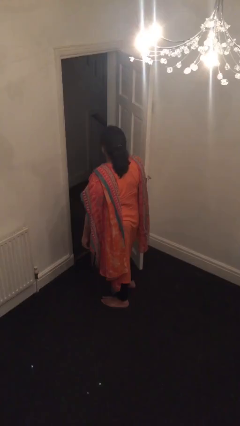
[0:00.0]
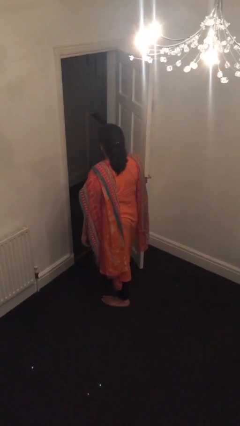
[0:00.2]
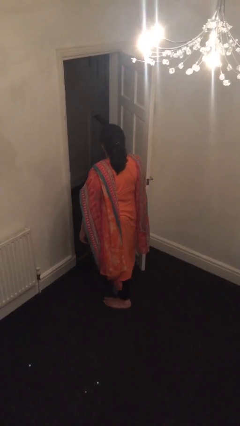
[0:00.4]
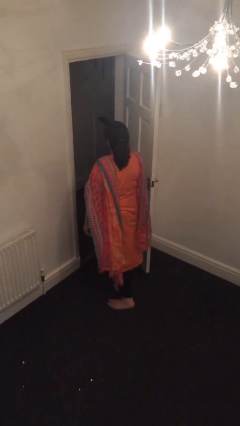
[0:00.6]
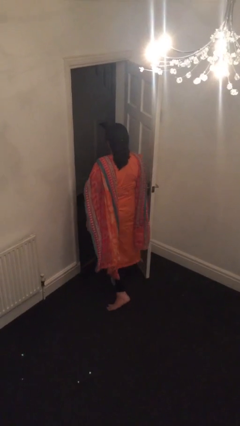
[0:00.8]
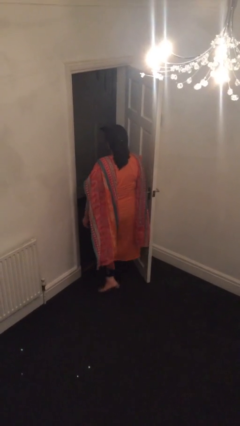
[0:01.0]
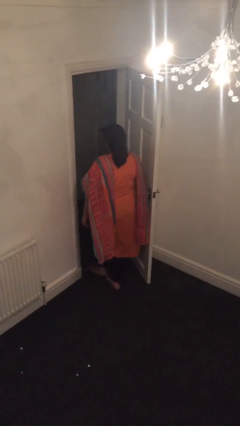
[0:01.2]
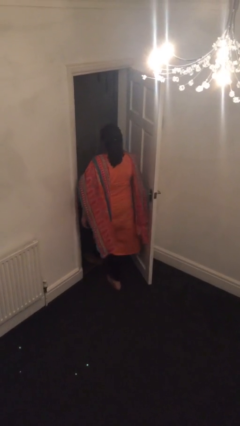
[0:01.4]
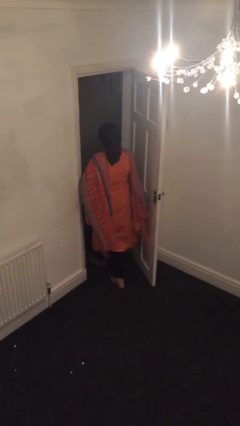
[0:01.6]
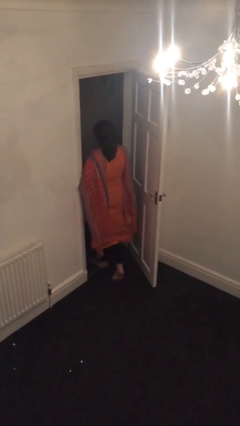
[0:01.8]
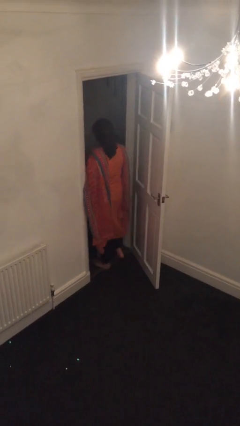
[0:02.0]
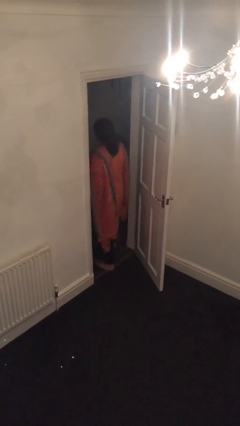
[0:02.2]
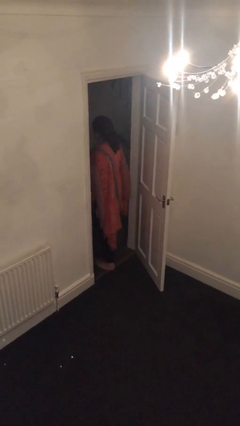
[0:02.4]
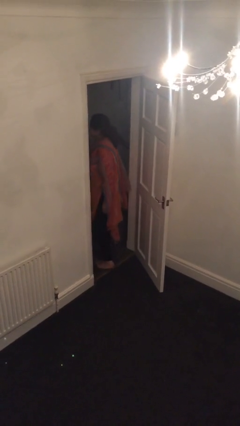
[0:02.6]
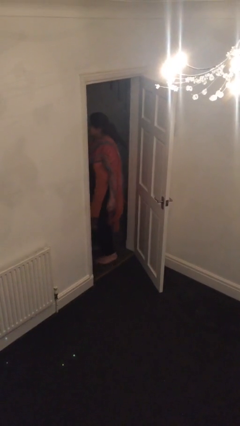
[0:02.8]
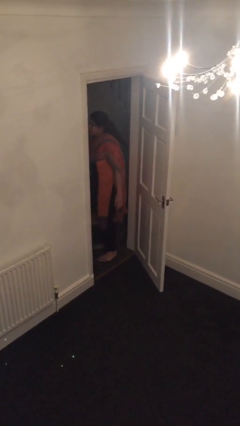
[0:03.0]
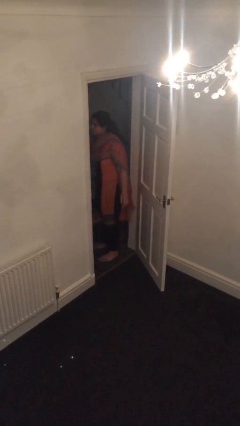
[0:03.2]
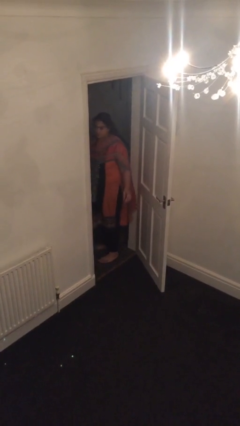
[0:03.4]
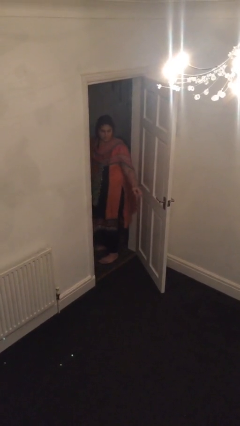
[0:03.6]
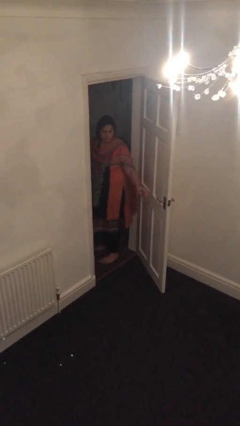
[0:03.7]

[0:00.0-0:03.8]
person exits scene through structure

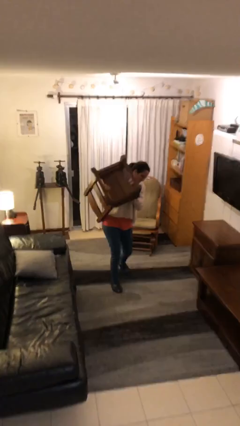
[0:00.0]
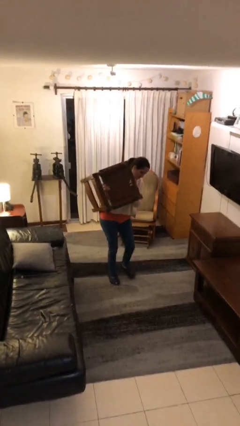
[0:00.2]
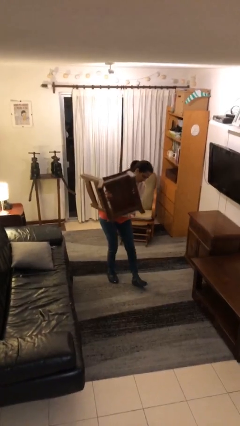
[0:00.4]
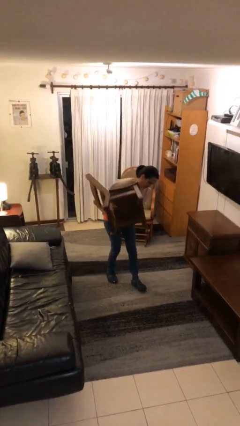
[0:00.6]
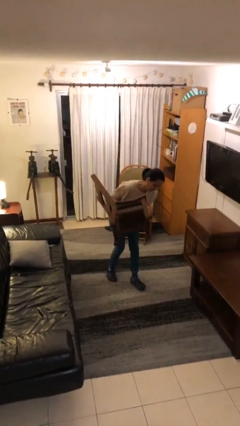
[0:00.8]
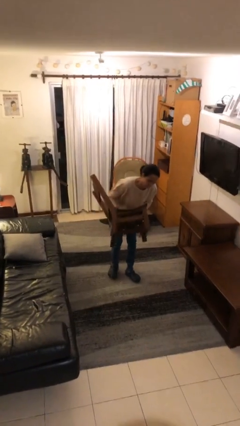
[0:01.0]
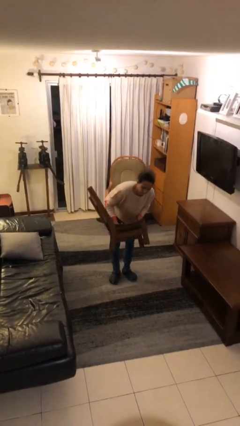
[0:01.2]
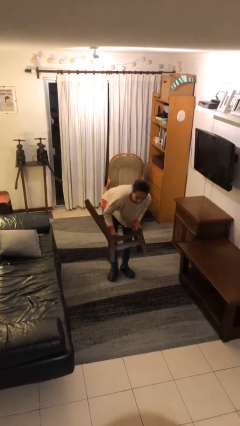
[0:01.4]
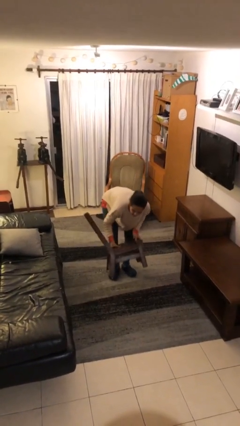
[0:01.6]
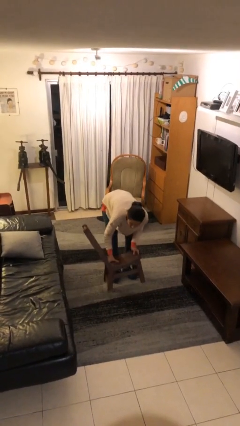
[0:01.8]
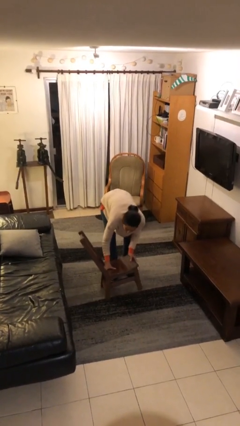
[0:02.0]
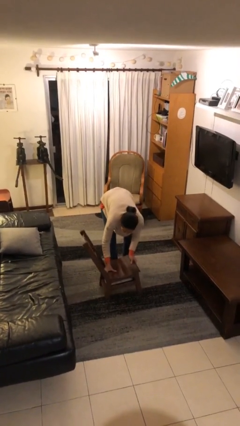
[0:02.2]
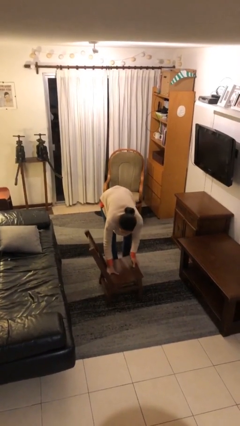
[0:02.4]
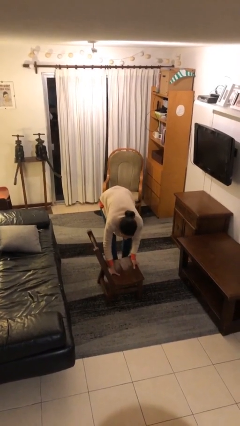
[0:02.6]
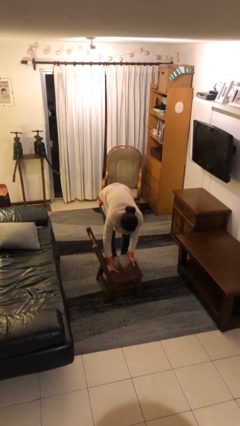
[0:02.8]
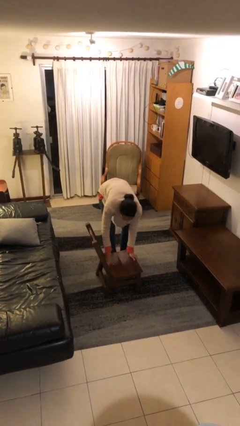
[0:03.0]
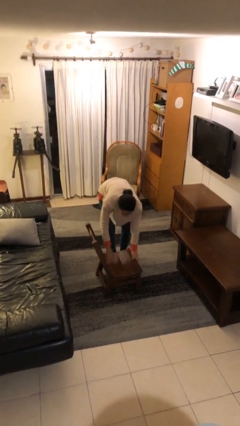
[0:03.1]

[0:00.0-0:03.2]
person puts down object on floor

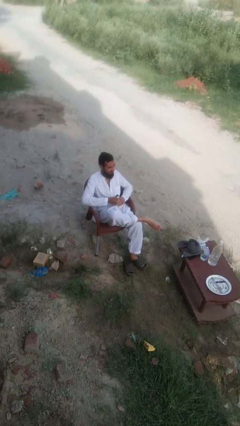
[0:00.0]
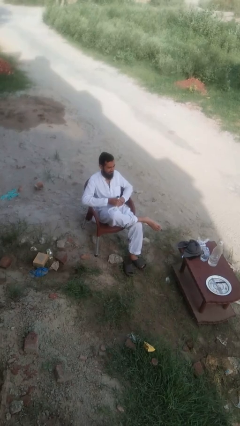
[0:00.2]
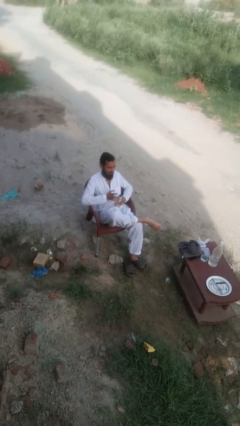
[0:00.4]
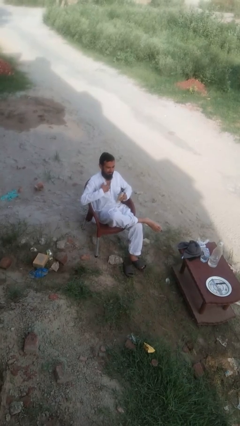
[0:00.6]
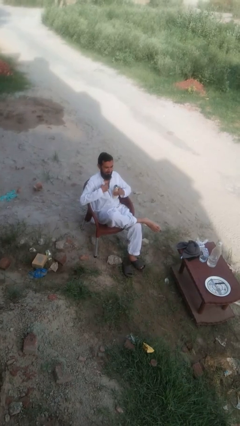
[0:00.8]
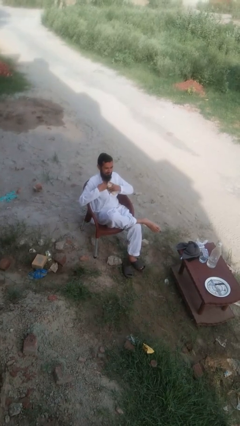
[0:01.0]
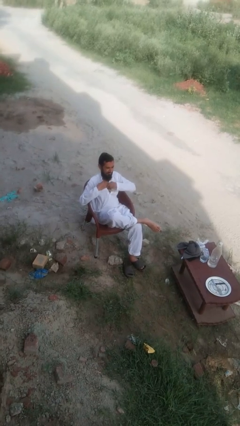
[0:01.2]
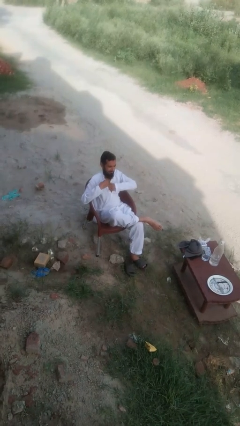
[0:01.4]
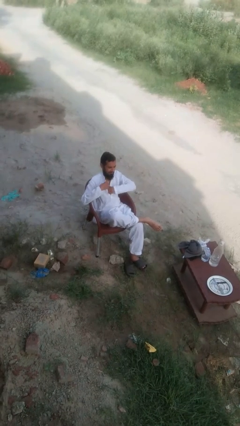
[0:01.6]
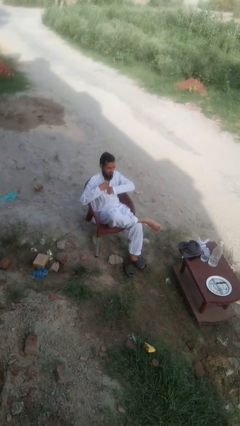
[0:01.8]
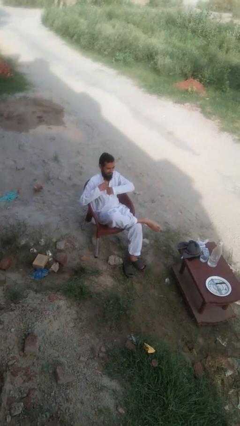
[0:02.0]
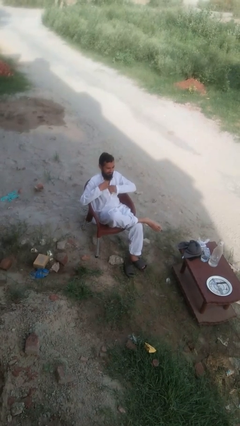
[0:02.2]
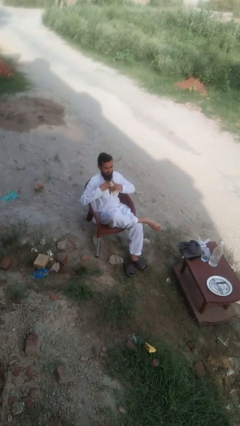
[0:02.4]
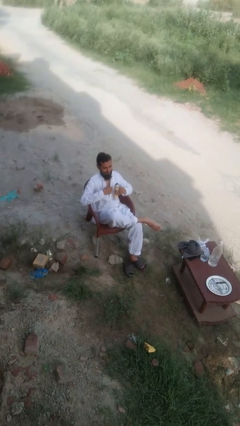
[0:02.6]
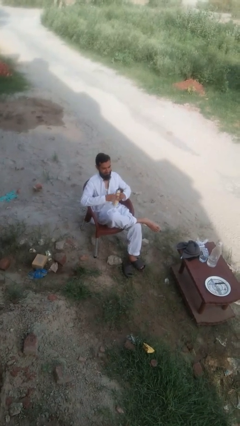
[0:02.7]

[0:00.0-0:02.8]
person applies deodorant

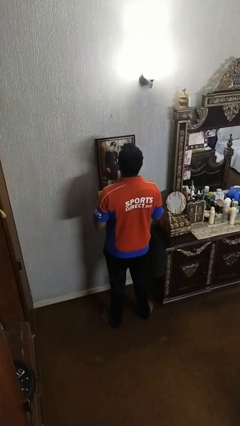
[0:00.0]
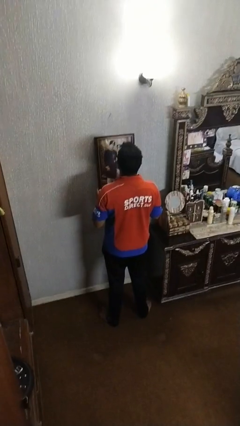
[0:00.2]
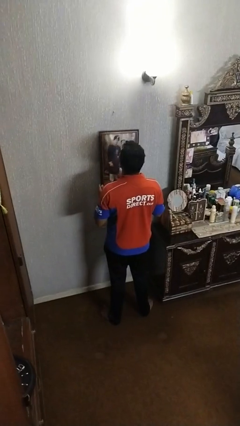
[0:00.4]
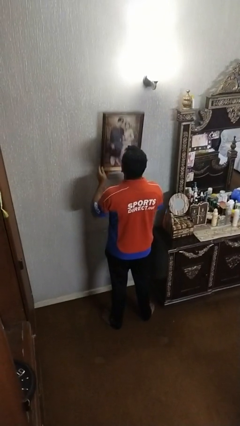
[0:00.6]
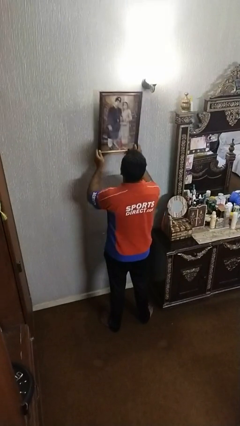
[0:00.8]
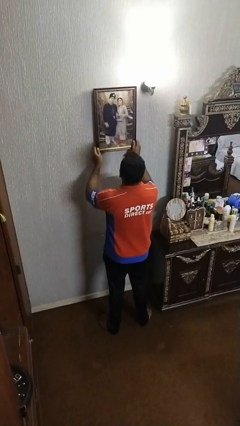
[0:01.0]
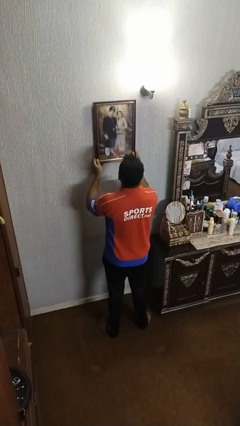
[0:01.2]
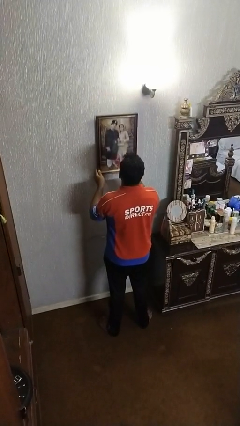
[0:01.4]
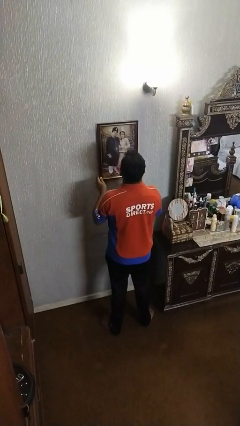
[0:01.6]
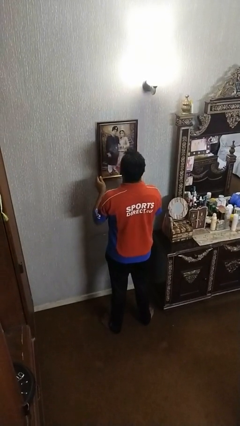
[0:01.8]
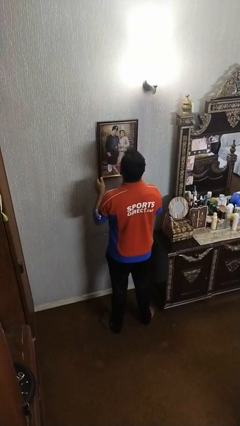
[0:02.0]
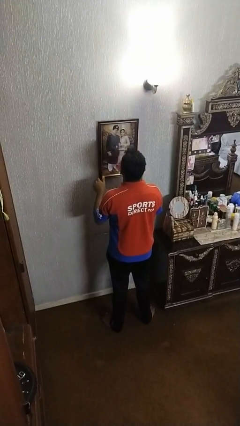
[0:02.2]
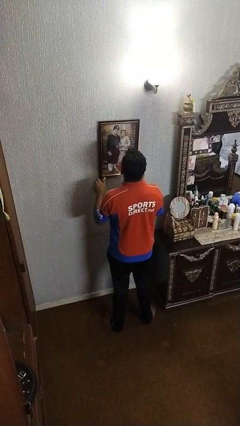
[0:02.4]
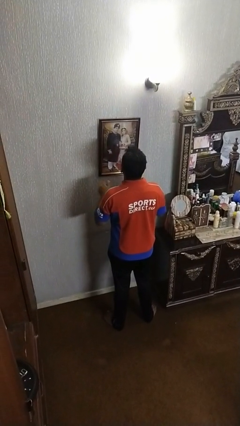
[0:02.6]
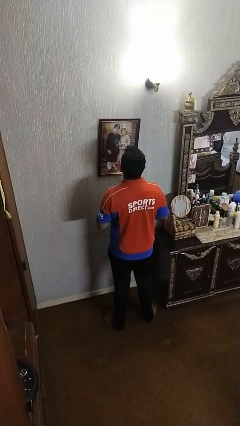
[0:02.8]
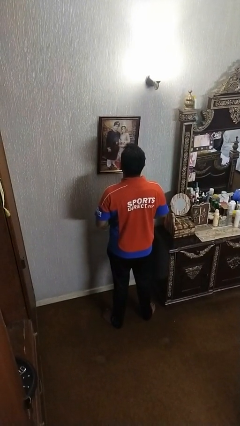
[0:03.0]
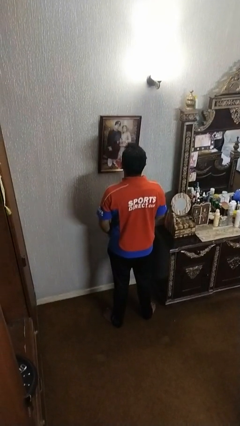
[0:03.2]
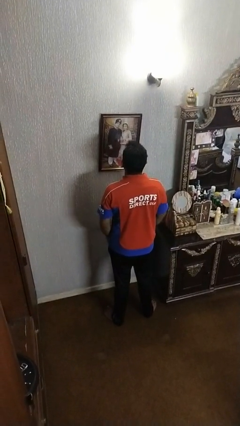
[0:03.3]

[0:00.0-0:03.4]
person puts up picture frame

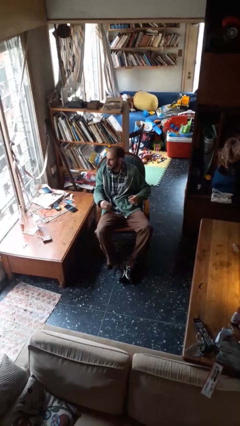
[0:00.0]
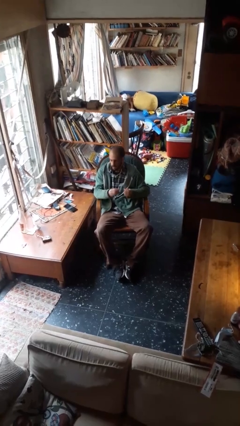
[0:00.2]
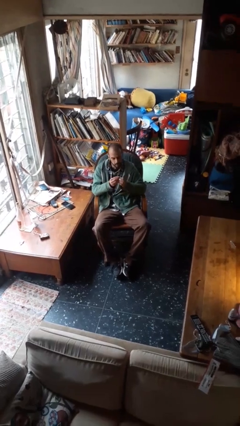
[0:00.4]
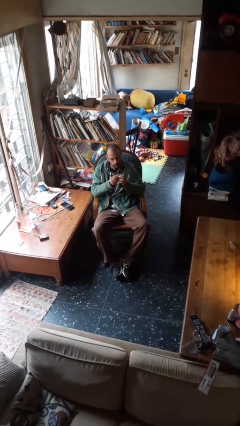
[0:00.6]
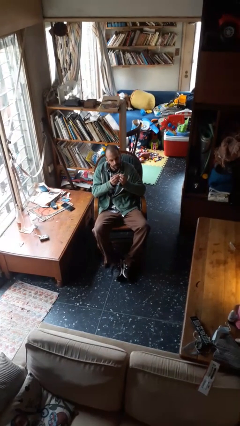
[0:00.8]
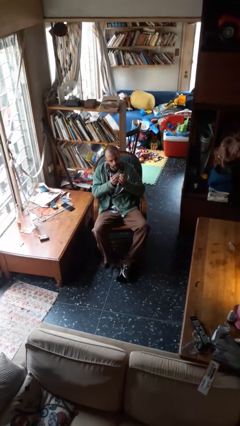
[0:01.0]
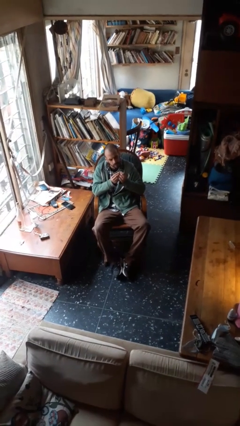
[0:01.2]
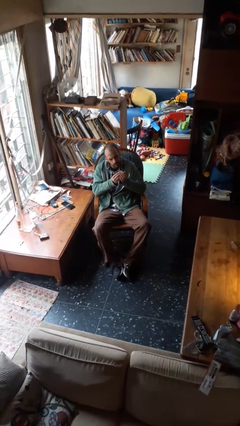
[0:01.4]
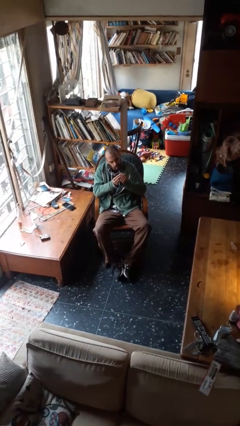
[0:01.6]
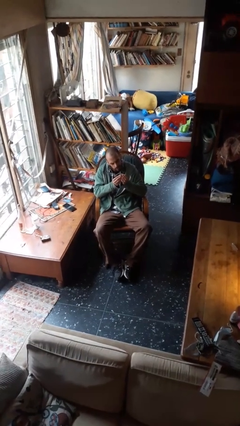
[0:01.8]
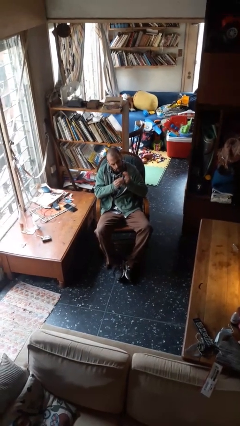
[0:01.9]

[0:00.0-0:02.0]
person files fingernails

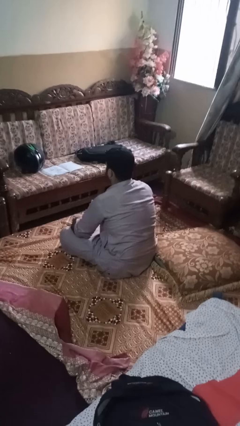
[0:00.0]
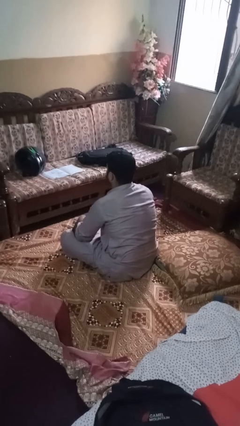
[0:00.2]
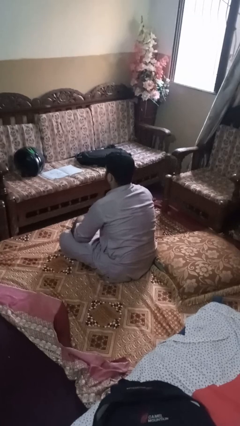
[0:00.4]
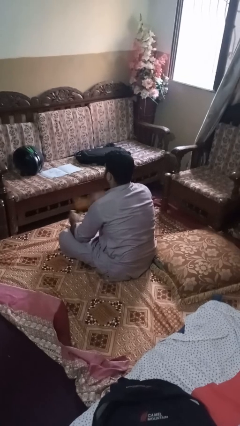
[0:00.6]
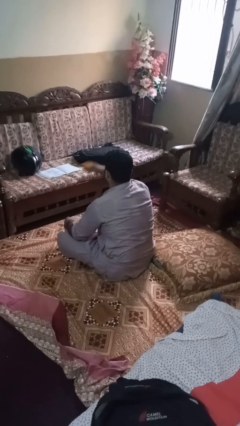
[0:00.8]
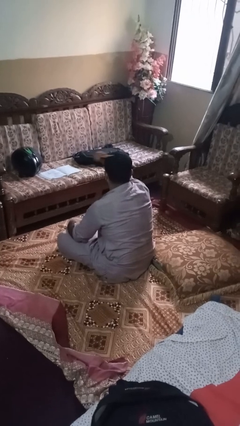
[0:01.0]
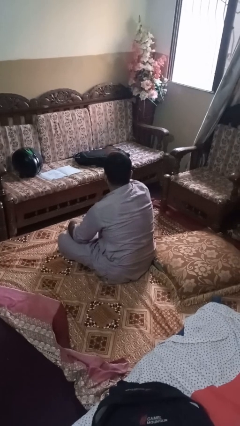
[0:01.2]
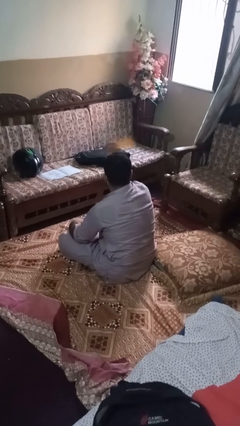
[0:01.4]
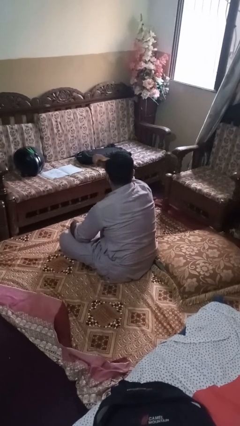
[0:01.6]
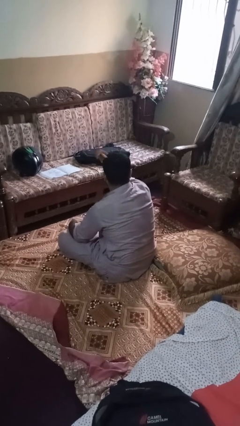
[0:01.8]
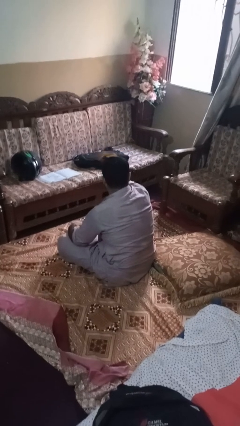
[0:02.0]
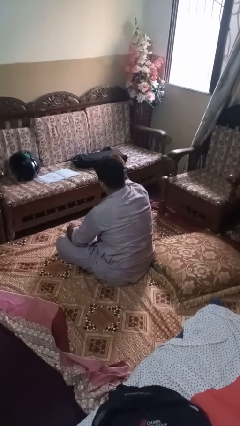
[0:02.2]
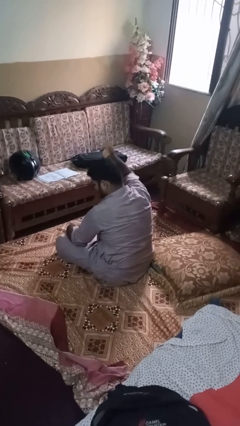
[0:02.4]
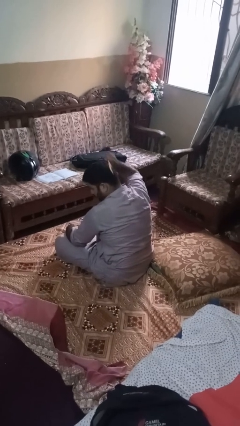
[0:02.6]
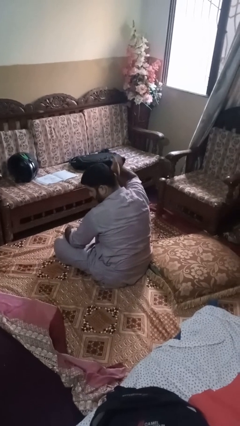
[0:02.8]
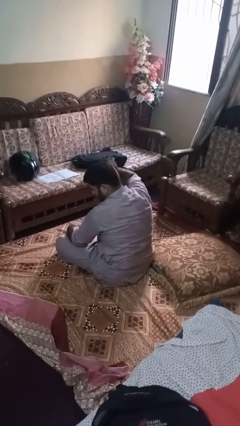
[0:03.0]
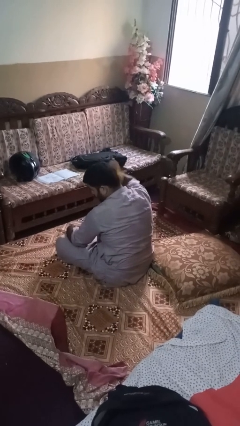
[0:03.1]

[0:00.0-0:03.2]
person brushes hair
